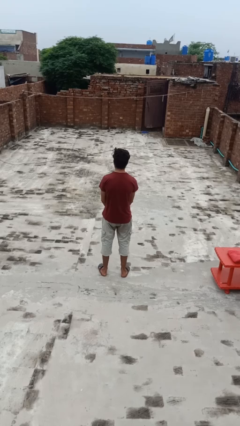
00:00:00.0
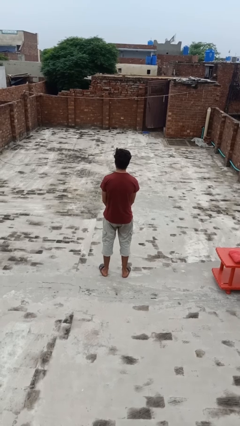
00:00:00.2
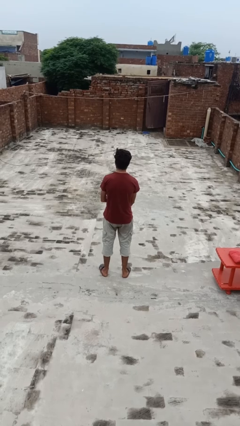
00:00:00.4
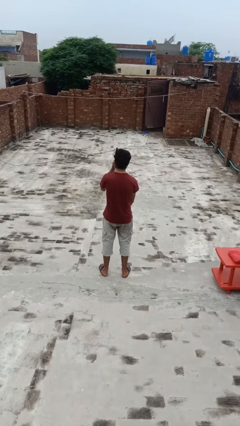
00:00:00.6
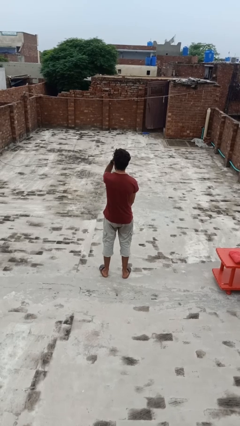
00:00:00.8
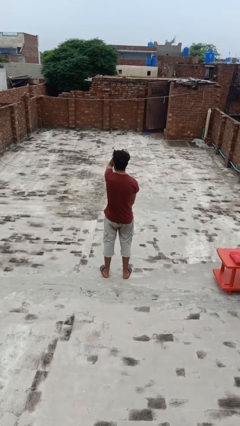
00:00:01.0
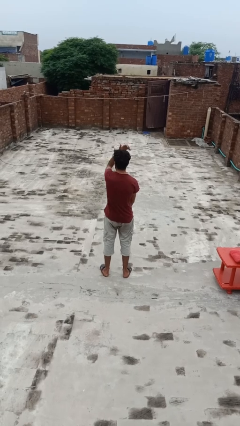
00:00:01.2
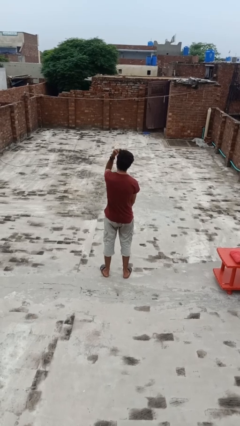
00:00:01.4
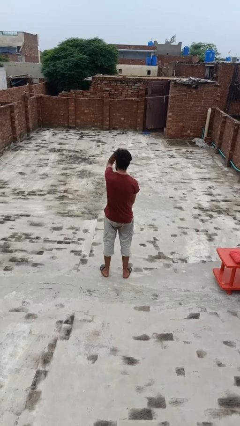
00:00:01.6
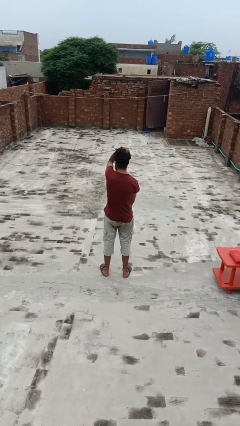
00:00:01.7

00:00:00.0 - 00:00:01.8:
person strokes hair

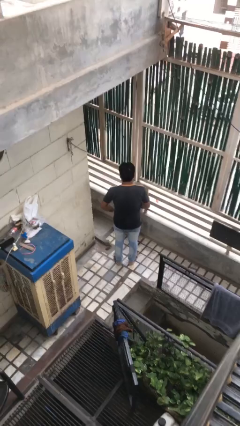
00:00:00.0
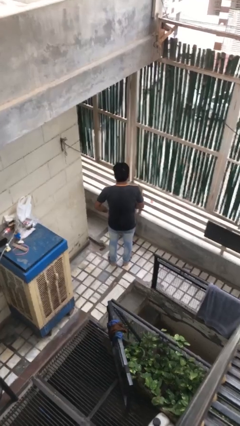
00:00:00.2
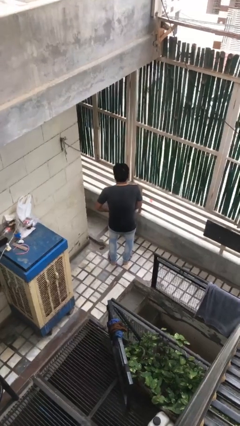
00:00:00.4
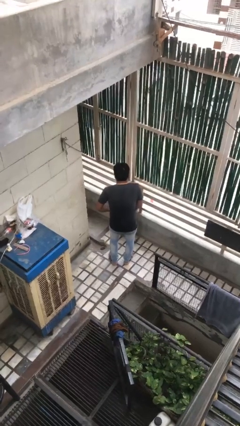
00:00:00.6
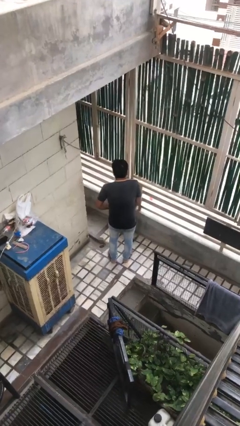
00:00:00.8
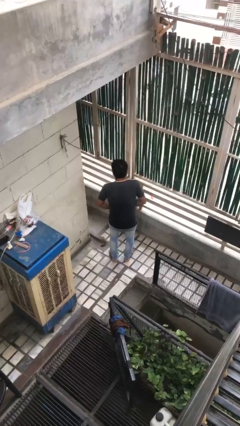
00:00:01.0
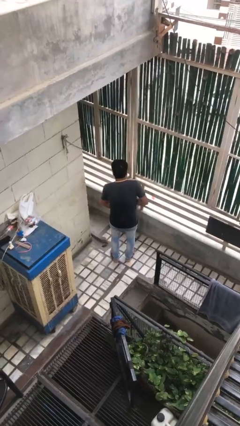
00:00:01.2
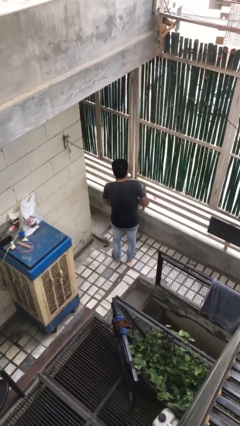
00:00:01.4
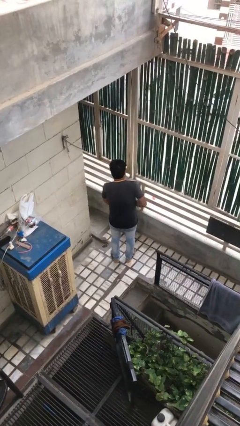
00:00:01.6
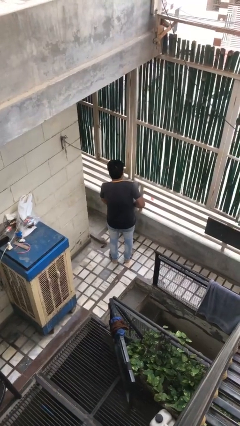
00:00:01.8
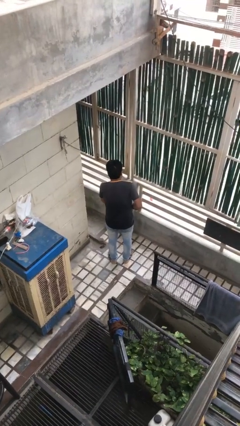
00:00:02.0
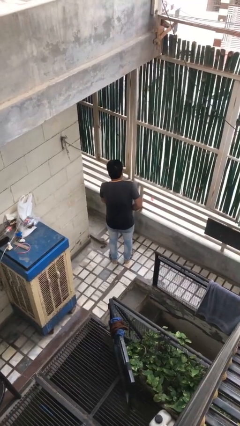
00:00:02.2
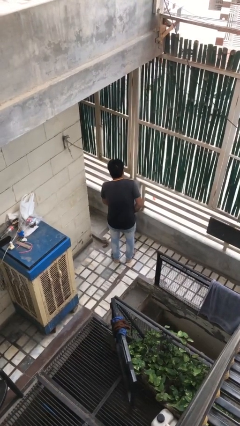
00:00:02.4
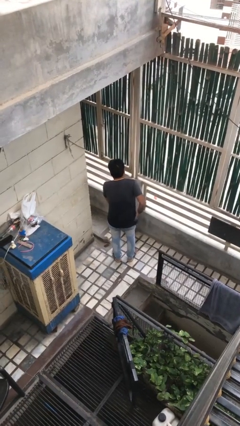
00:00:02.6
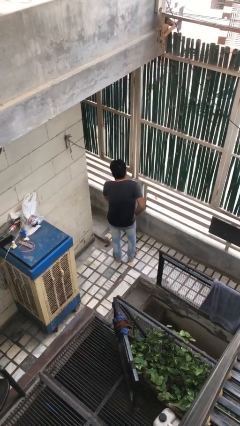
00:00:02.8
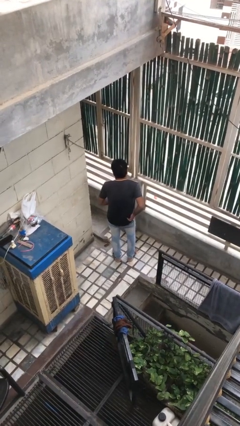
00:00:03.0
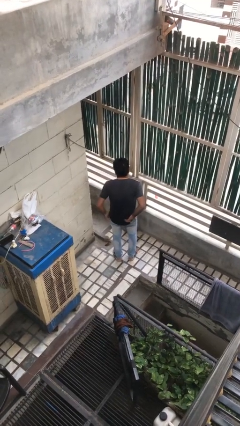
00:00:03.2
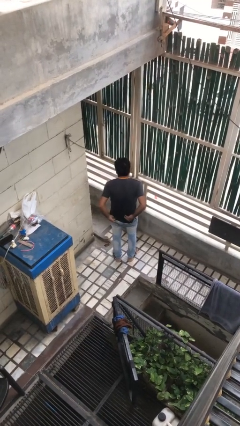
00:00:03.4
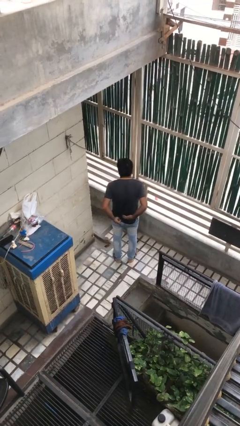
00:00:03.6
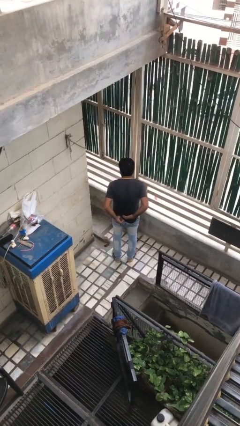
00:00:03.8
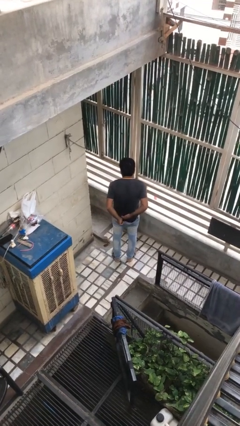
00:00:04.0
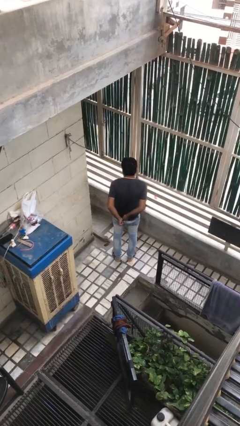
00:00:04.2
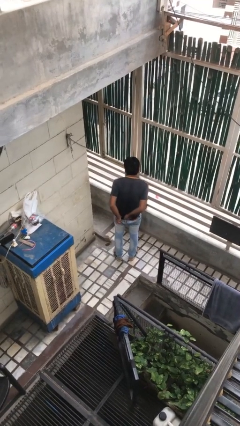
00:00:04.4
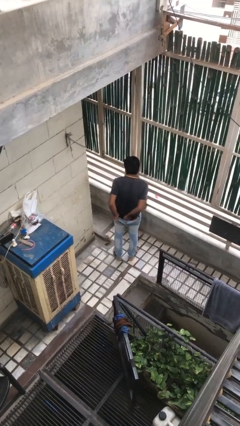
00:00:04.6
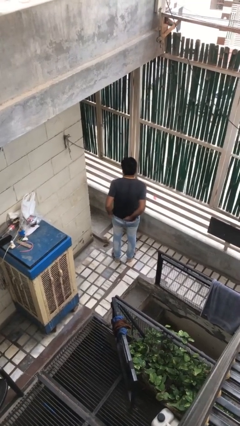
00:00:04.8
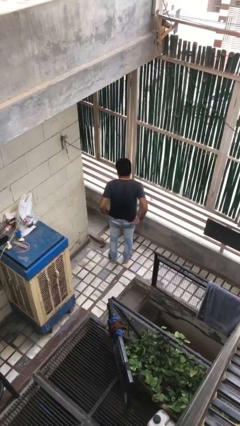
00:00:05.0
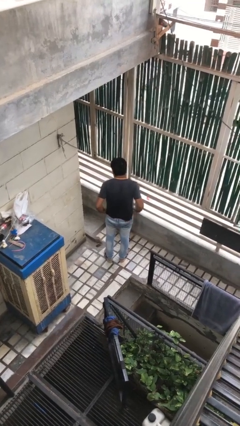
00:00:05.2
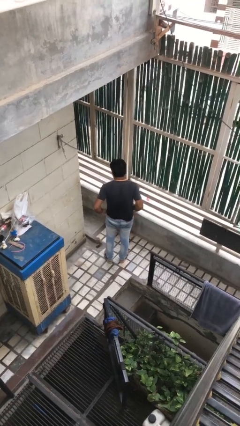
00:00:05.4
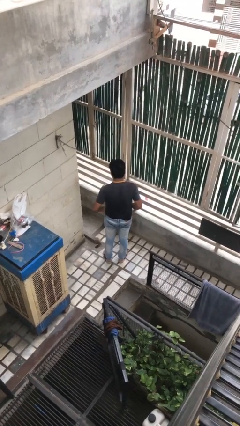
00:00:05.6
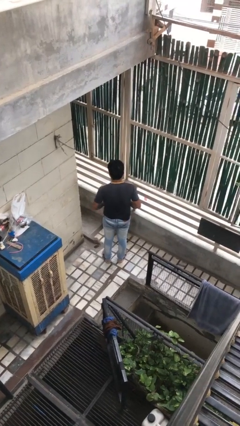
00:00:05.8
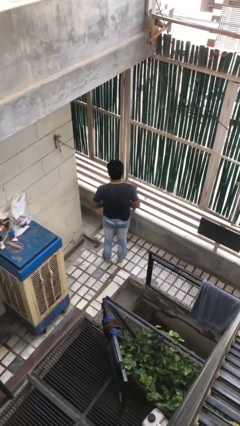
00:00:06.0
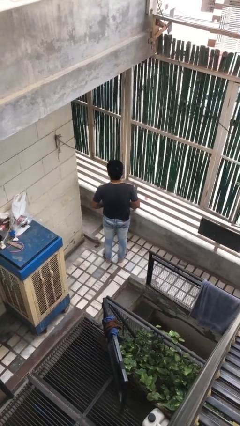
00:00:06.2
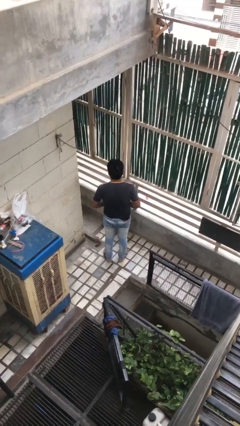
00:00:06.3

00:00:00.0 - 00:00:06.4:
person tucks in shirt

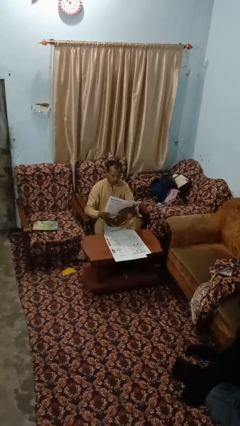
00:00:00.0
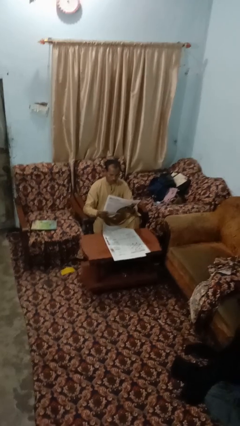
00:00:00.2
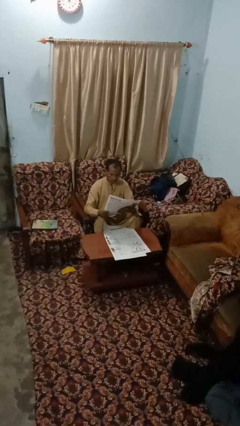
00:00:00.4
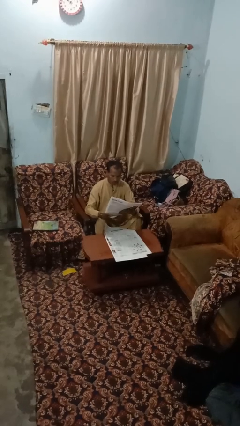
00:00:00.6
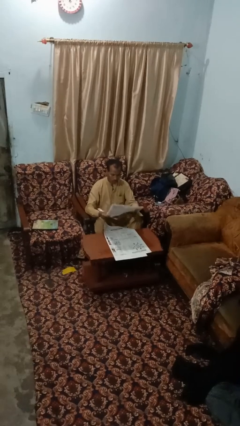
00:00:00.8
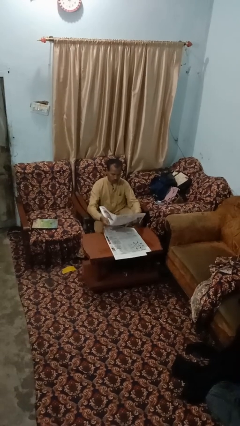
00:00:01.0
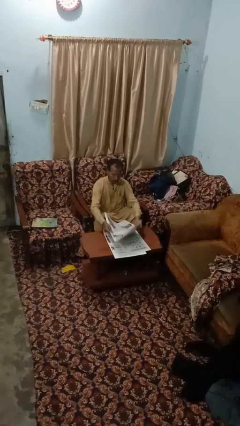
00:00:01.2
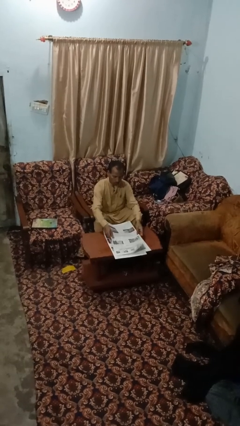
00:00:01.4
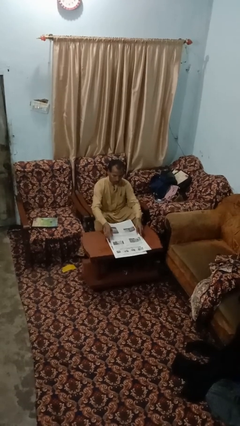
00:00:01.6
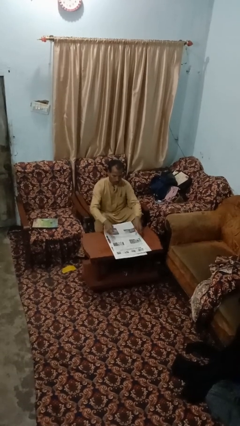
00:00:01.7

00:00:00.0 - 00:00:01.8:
person reads newspaper

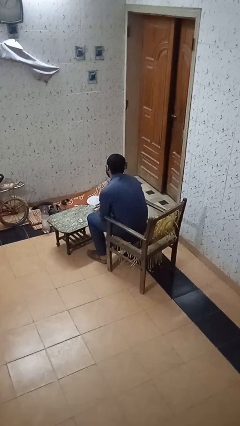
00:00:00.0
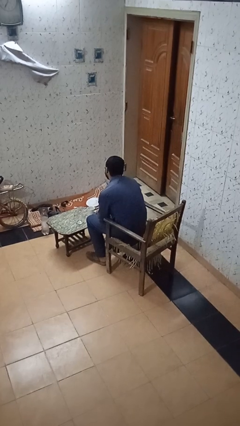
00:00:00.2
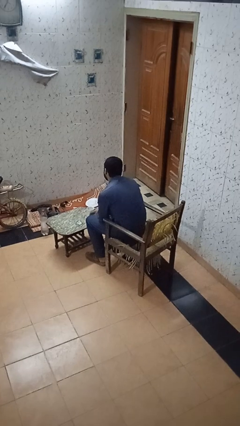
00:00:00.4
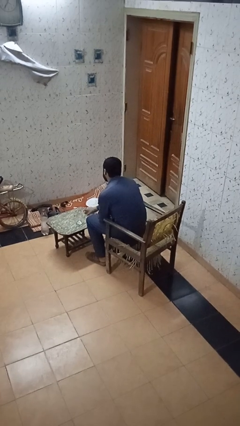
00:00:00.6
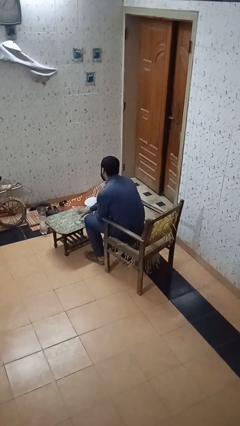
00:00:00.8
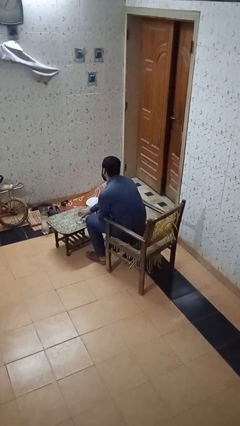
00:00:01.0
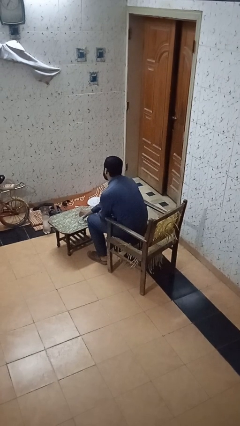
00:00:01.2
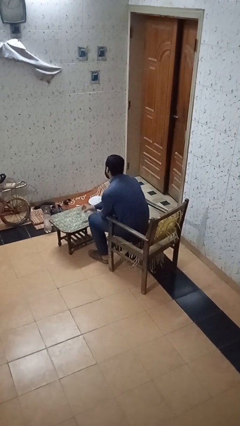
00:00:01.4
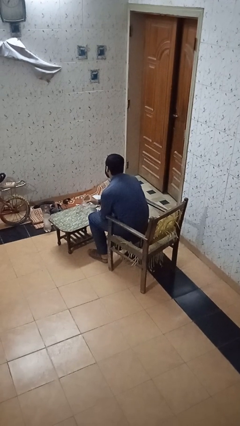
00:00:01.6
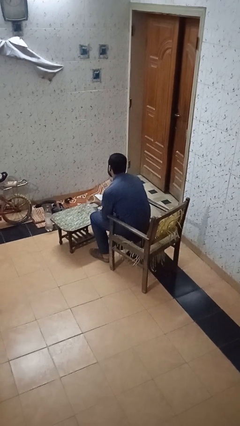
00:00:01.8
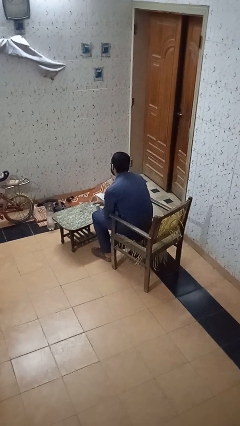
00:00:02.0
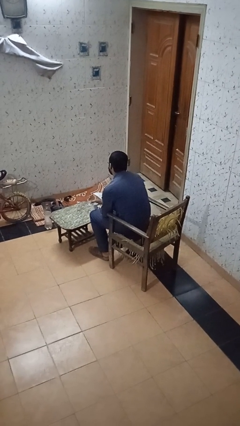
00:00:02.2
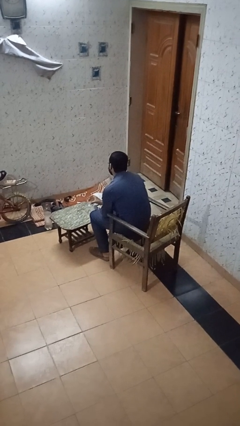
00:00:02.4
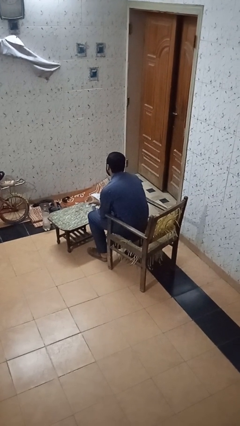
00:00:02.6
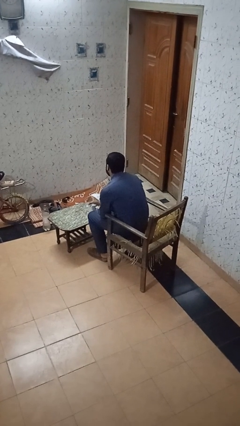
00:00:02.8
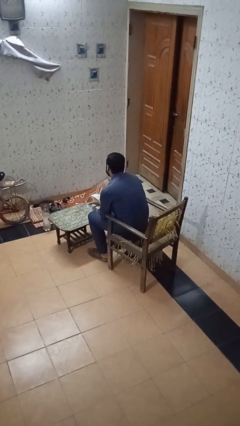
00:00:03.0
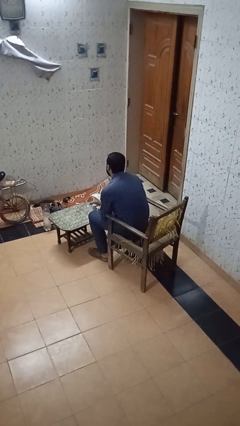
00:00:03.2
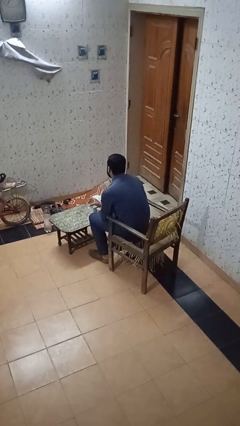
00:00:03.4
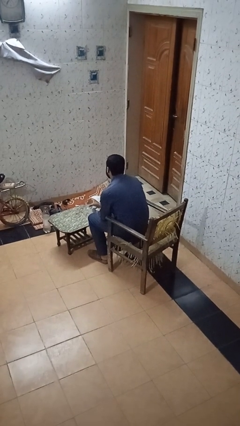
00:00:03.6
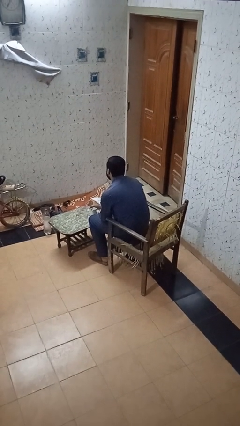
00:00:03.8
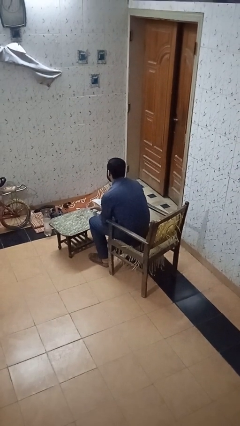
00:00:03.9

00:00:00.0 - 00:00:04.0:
person picks up object from table

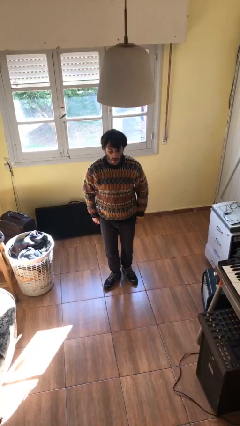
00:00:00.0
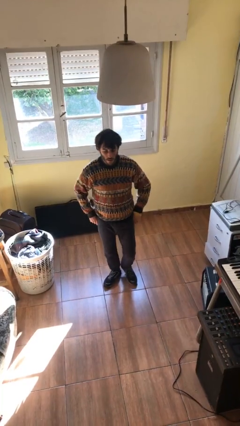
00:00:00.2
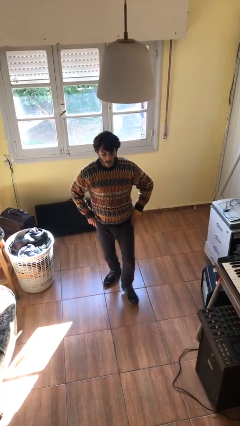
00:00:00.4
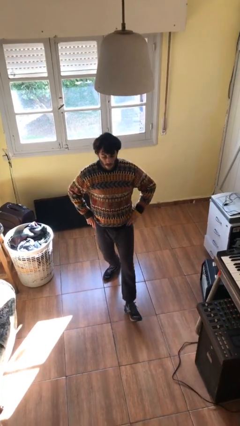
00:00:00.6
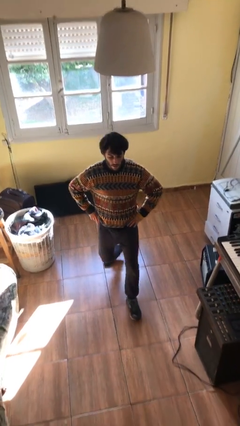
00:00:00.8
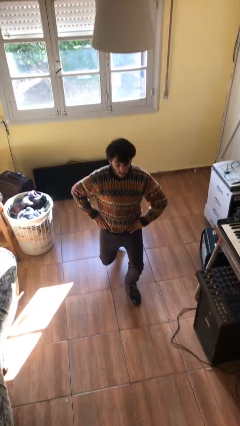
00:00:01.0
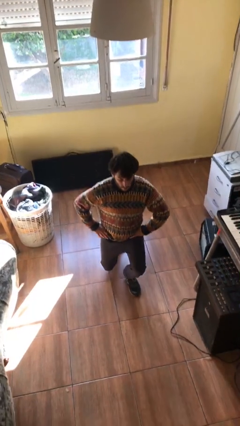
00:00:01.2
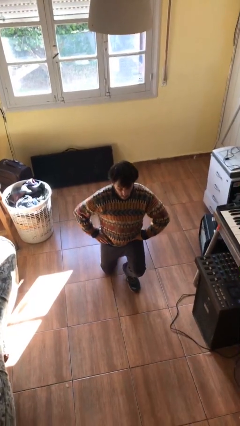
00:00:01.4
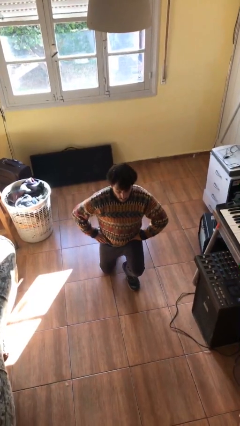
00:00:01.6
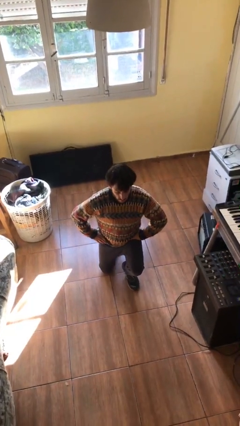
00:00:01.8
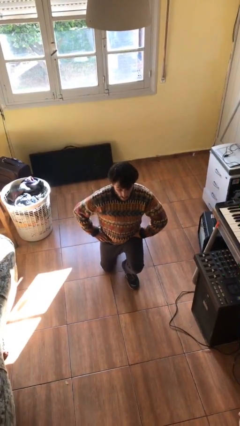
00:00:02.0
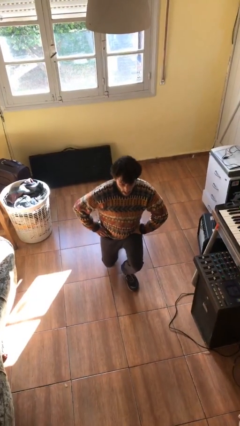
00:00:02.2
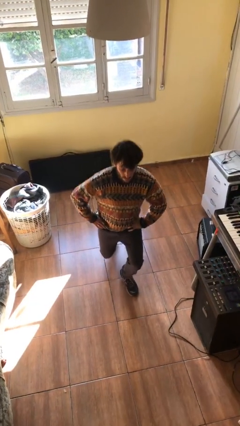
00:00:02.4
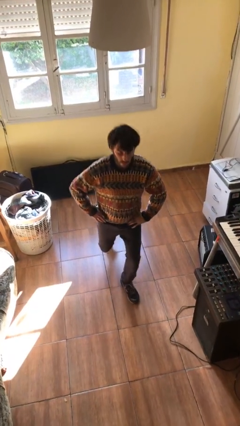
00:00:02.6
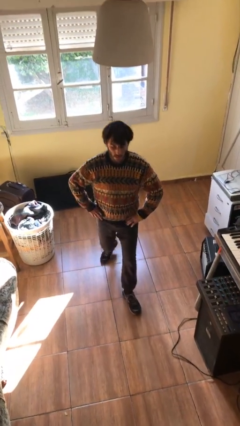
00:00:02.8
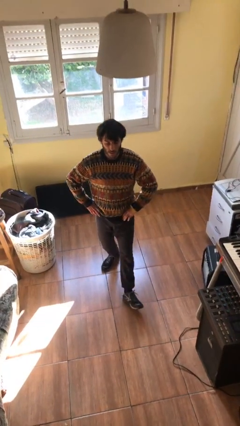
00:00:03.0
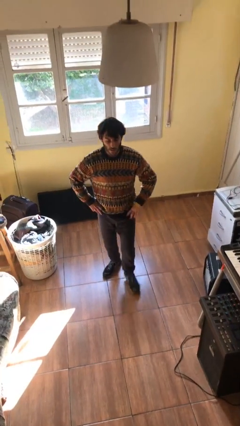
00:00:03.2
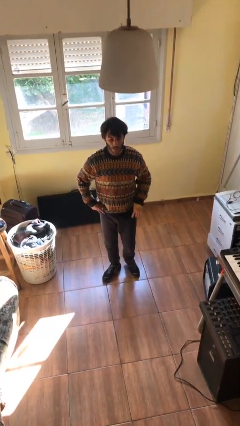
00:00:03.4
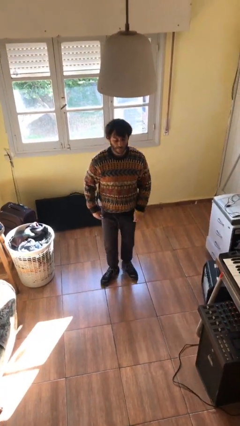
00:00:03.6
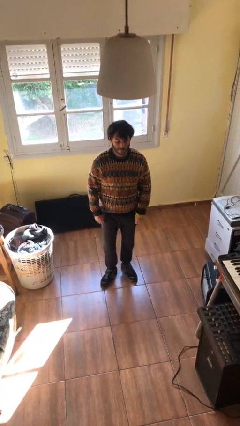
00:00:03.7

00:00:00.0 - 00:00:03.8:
person exercises with lunges
